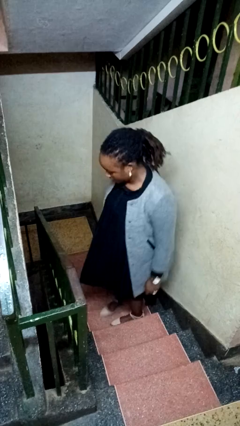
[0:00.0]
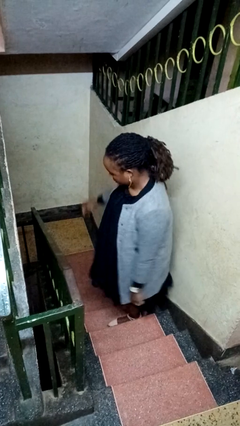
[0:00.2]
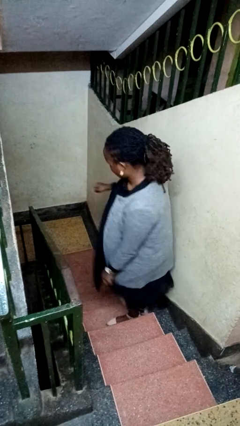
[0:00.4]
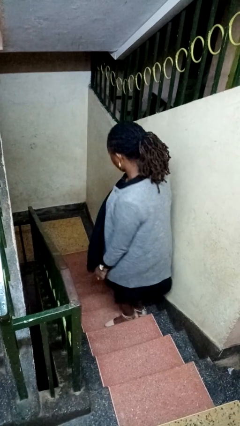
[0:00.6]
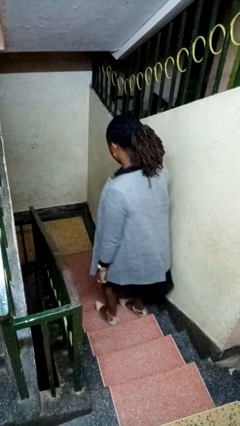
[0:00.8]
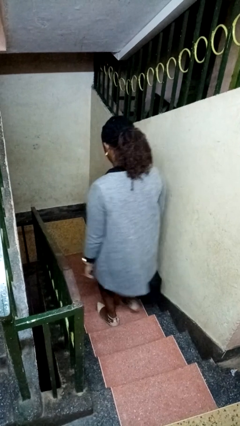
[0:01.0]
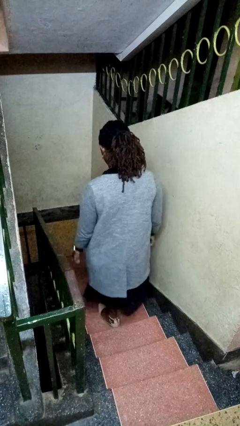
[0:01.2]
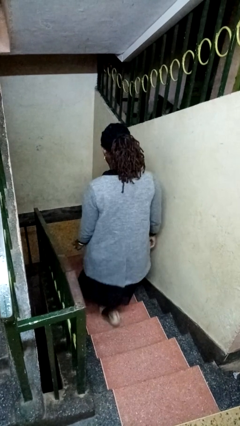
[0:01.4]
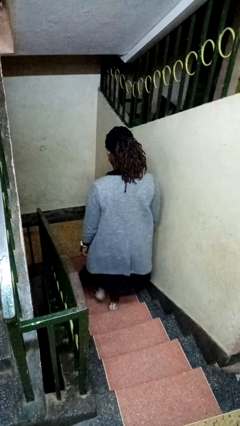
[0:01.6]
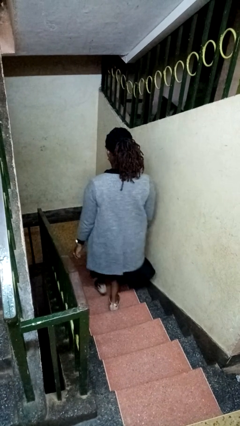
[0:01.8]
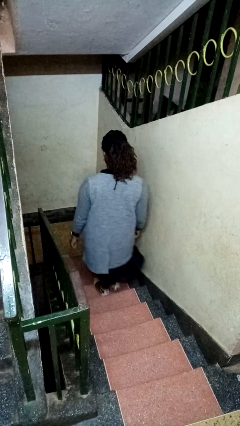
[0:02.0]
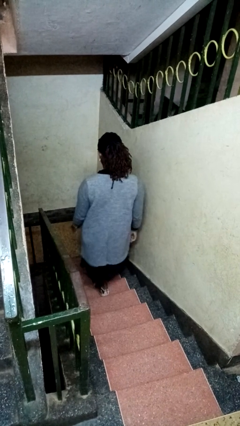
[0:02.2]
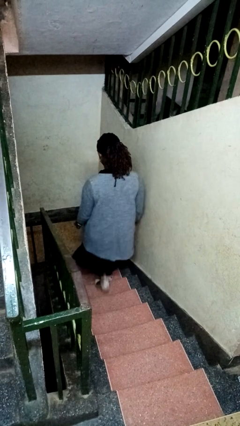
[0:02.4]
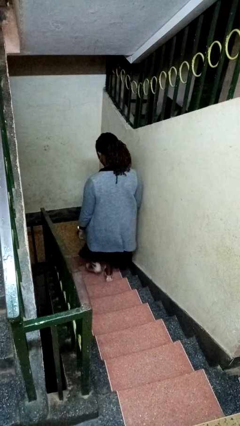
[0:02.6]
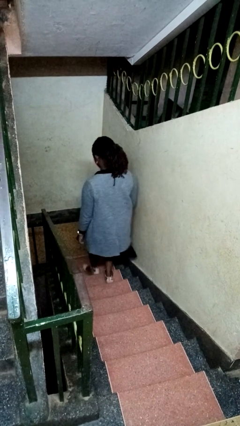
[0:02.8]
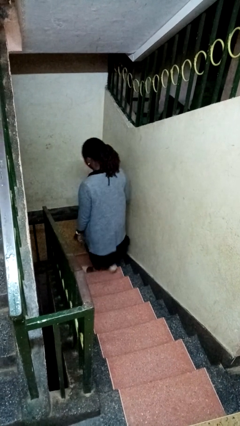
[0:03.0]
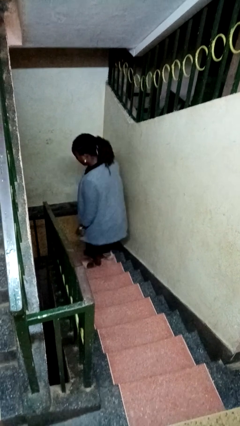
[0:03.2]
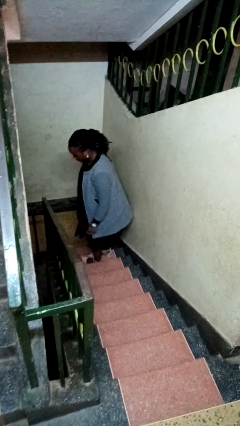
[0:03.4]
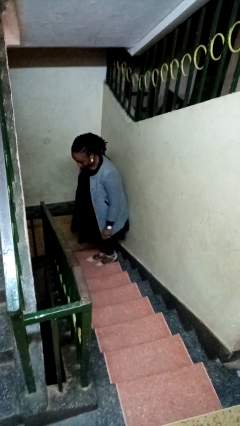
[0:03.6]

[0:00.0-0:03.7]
person climbs down stairs

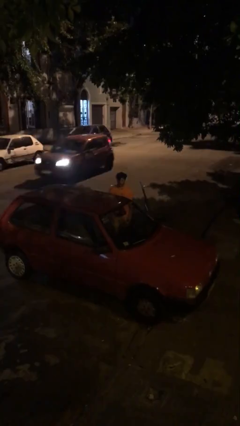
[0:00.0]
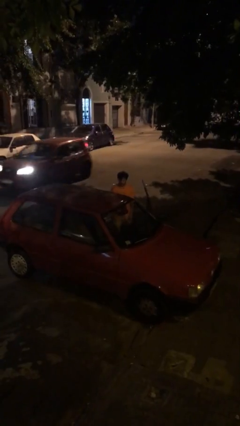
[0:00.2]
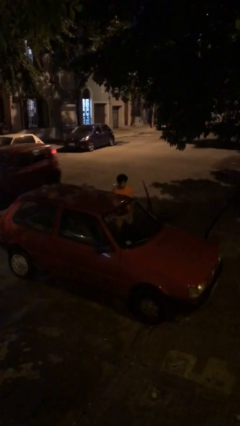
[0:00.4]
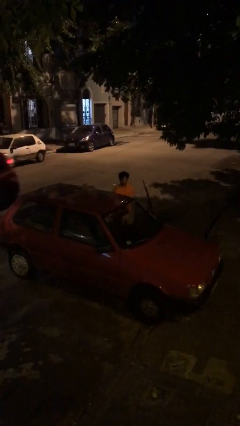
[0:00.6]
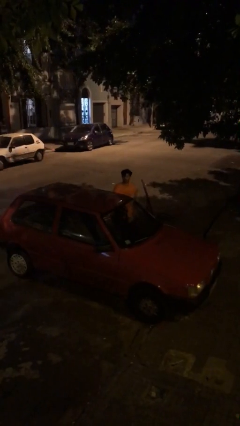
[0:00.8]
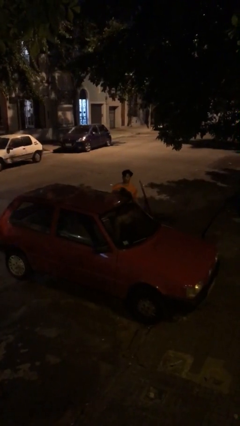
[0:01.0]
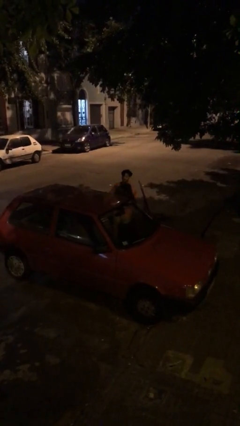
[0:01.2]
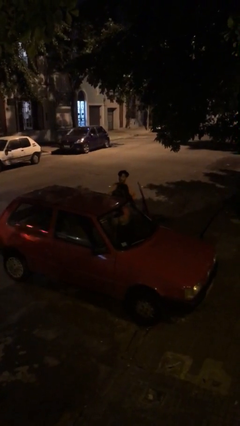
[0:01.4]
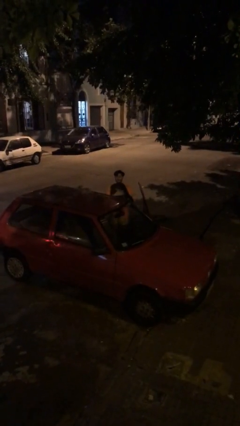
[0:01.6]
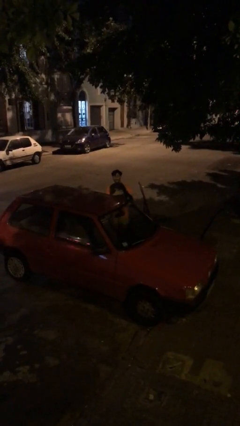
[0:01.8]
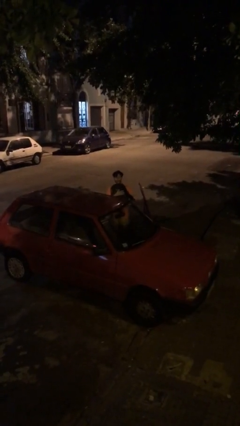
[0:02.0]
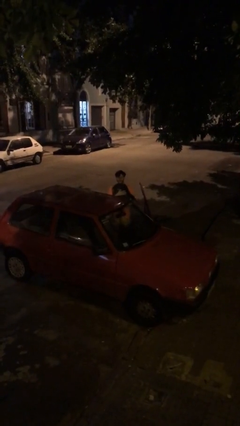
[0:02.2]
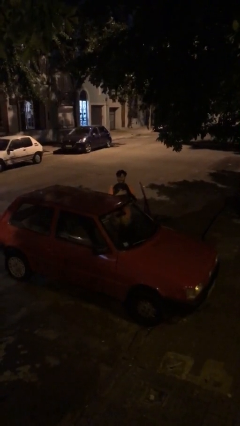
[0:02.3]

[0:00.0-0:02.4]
person unloads car

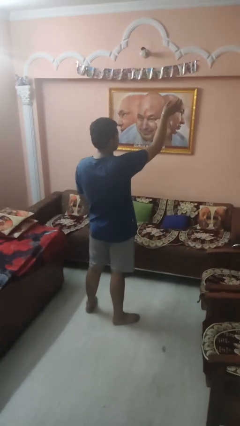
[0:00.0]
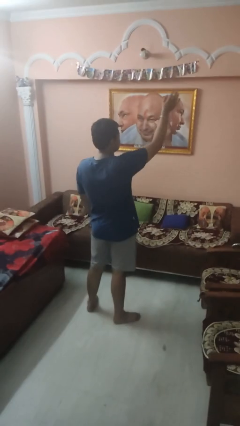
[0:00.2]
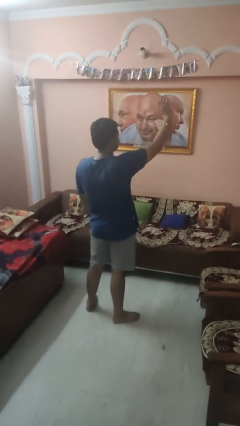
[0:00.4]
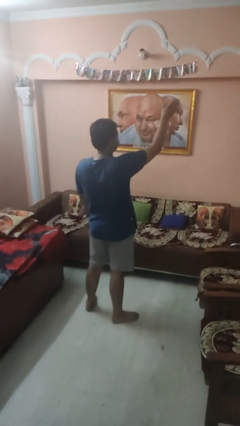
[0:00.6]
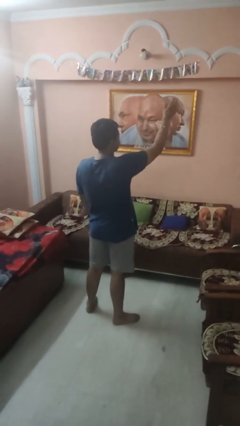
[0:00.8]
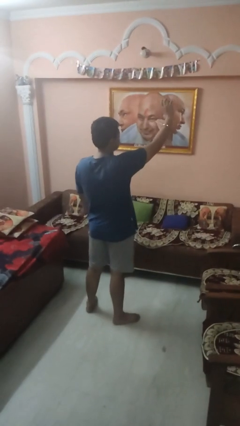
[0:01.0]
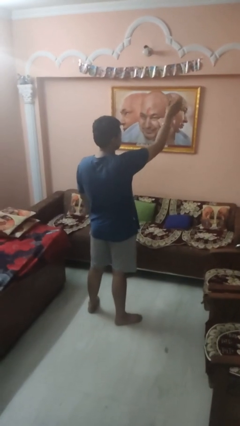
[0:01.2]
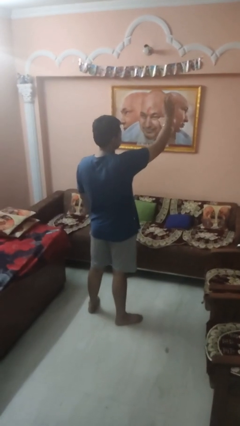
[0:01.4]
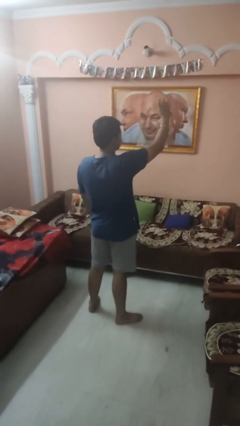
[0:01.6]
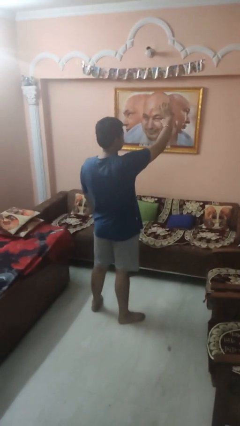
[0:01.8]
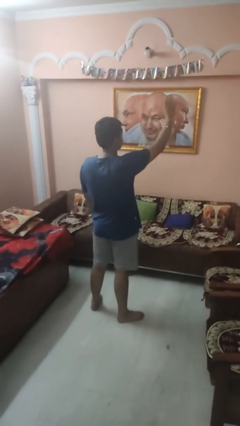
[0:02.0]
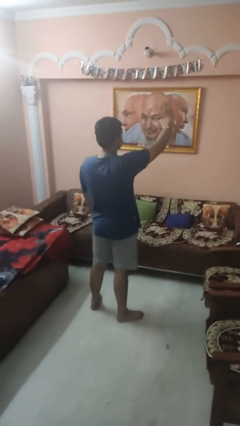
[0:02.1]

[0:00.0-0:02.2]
person waves at person

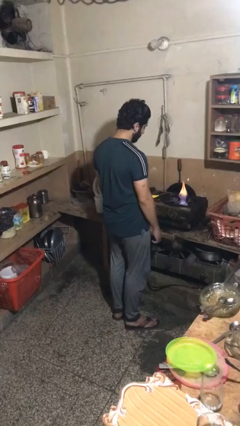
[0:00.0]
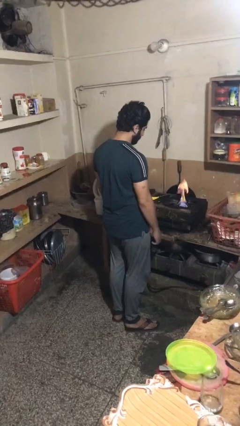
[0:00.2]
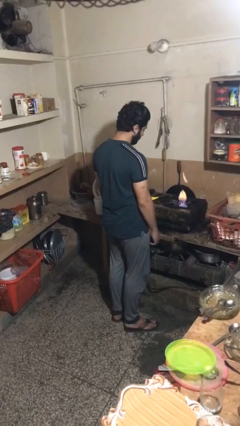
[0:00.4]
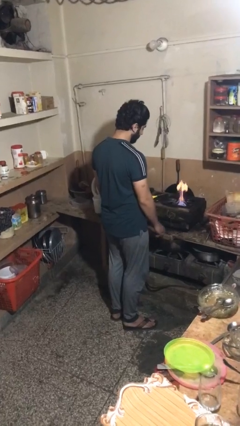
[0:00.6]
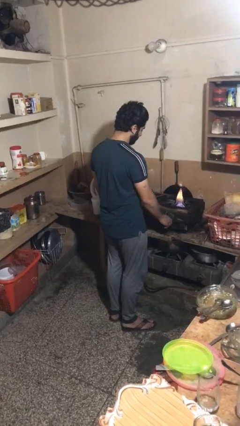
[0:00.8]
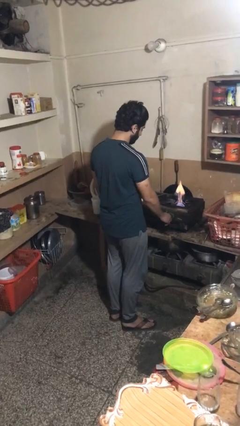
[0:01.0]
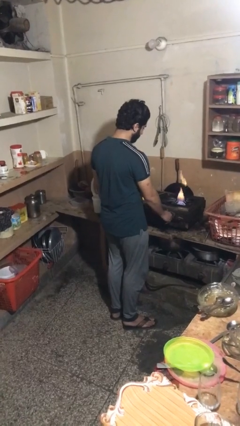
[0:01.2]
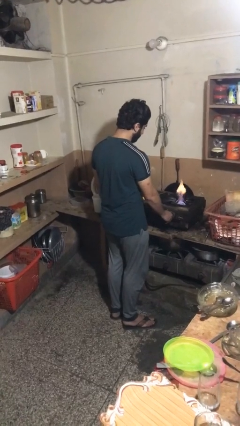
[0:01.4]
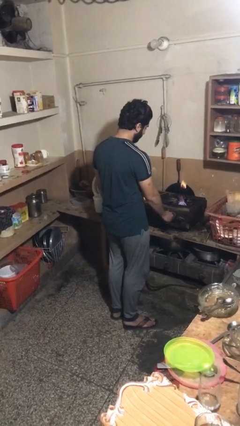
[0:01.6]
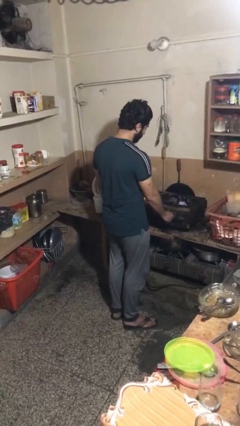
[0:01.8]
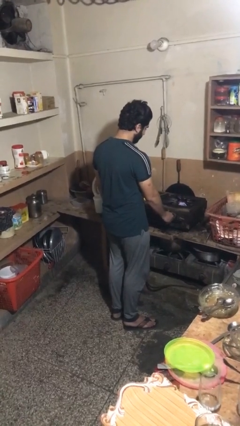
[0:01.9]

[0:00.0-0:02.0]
person turns off stovetop

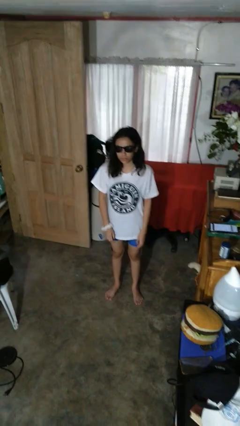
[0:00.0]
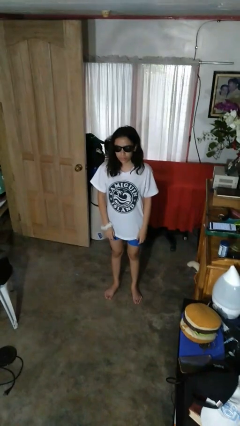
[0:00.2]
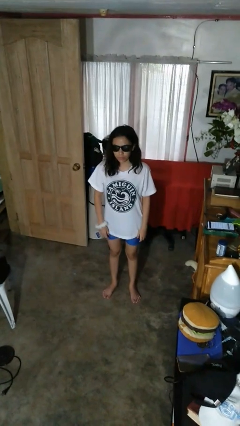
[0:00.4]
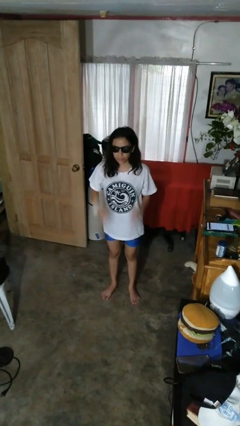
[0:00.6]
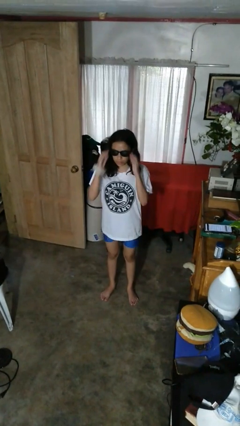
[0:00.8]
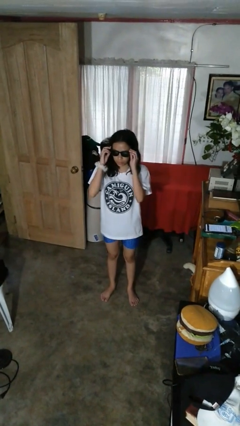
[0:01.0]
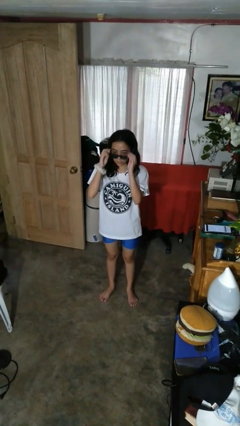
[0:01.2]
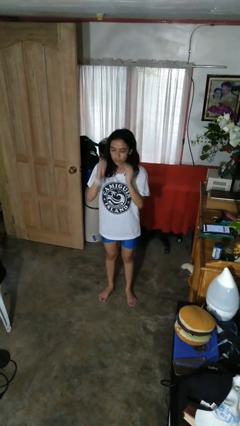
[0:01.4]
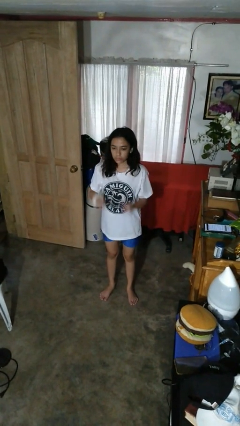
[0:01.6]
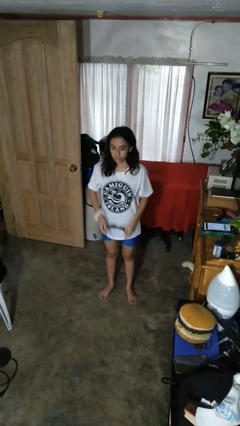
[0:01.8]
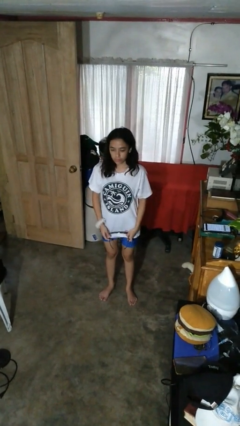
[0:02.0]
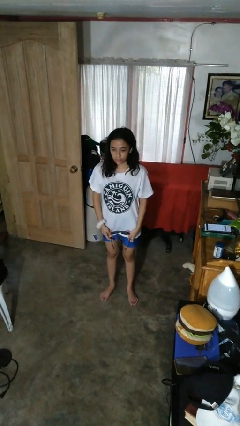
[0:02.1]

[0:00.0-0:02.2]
person takes off sunglasses

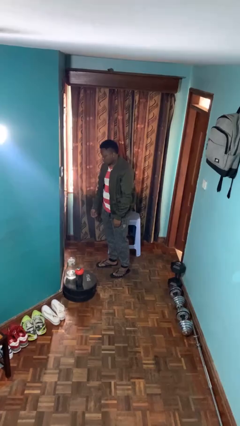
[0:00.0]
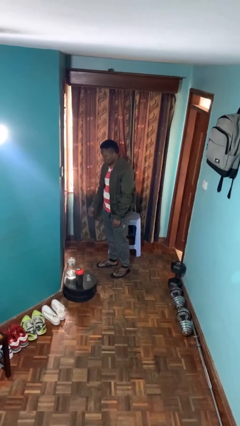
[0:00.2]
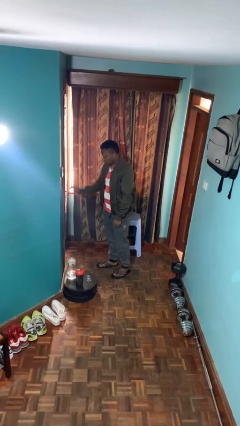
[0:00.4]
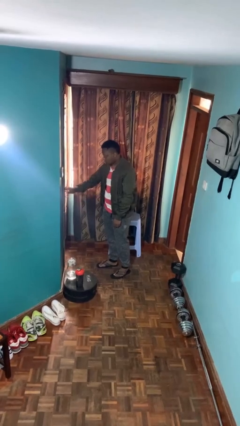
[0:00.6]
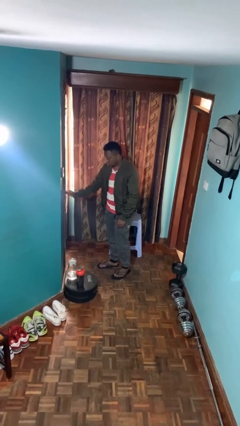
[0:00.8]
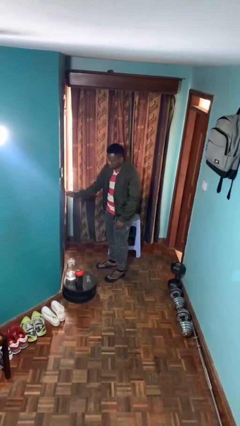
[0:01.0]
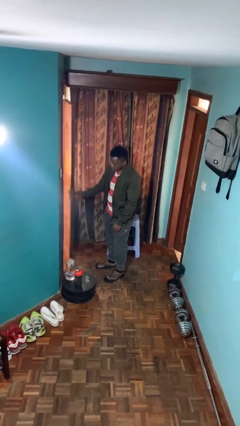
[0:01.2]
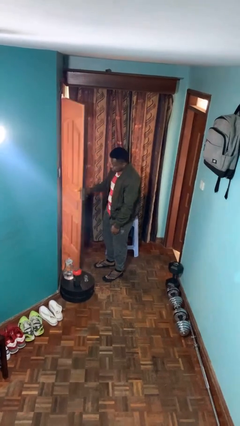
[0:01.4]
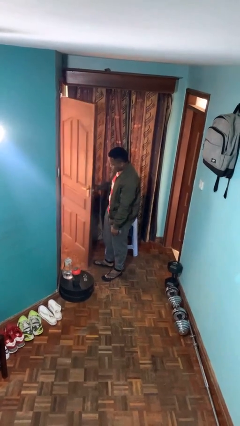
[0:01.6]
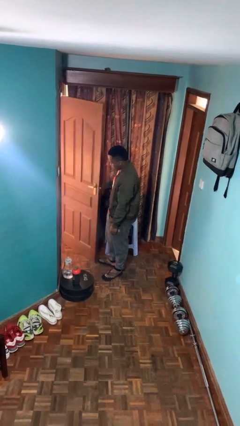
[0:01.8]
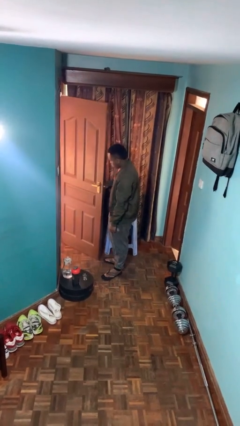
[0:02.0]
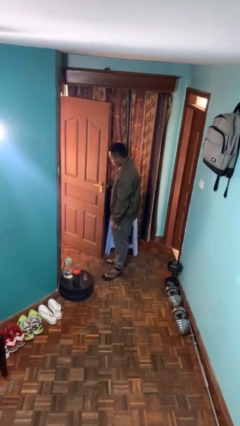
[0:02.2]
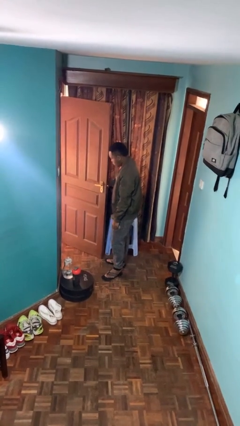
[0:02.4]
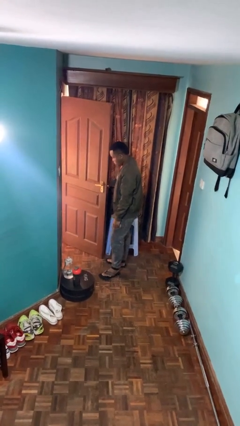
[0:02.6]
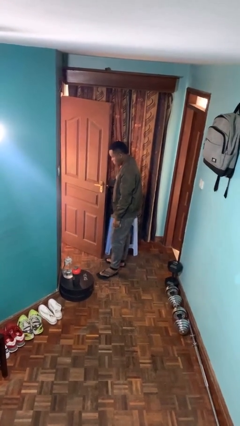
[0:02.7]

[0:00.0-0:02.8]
person opens facility door

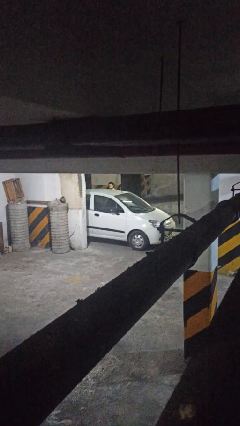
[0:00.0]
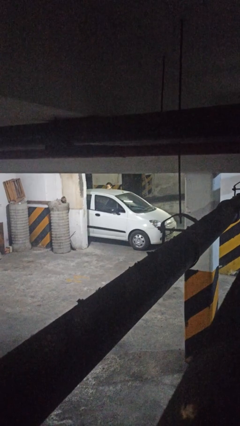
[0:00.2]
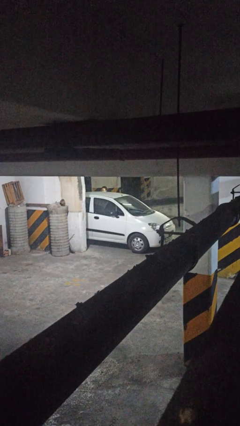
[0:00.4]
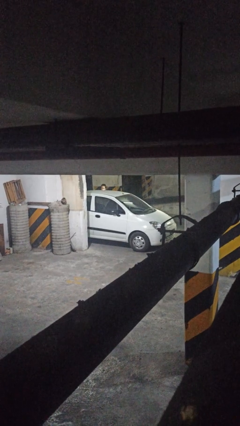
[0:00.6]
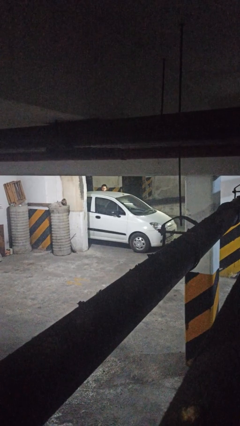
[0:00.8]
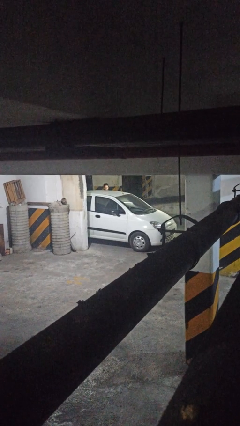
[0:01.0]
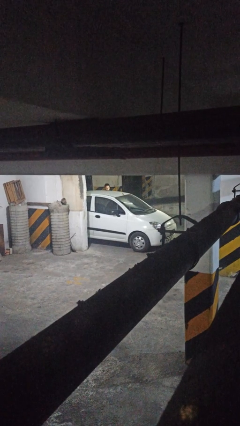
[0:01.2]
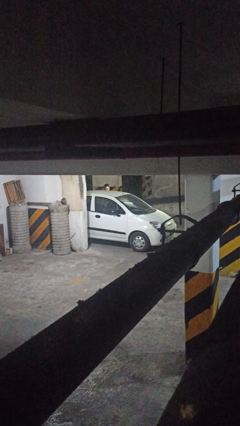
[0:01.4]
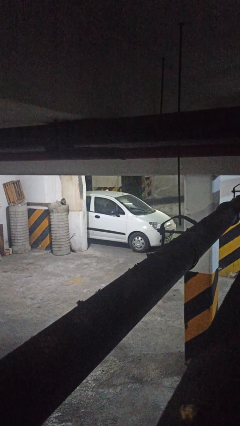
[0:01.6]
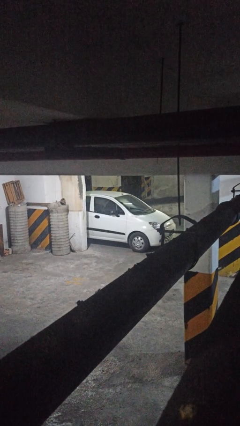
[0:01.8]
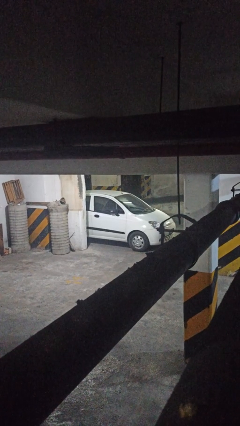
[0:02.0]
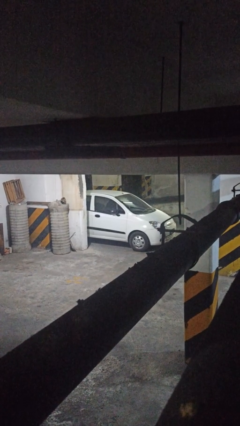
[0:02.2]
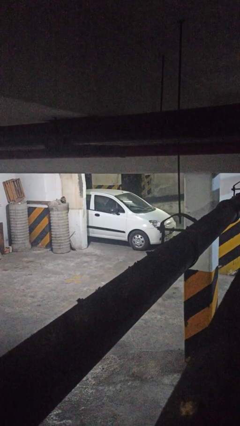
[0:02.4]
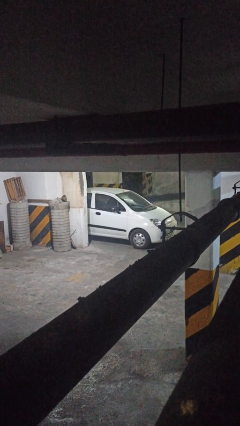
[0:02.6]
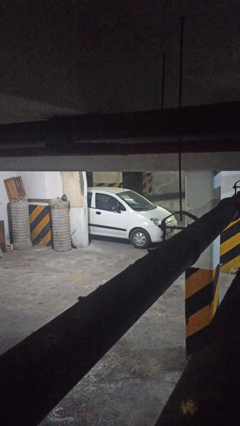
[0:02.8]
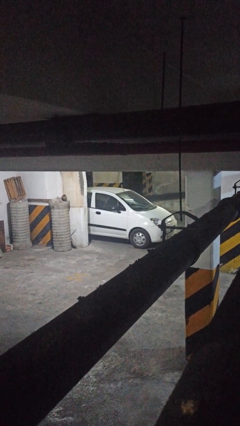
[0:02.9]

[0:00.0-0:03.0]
car picks up person
